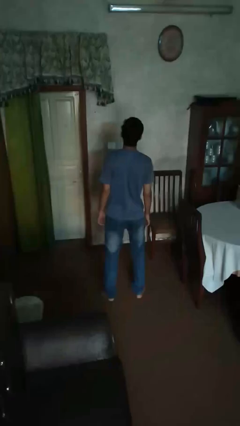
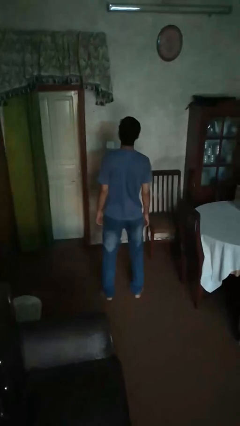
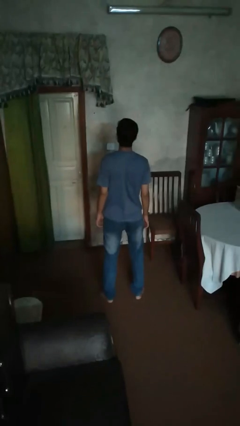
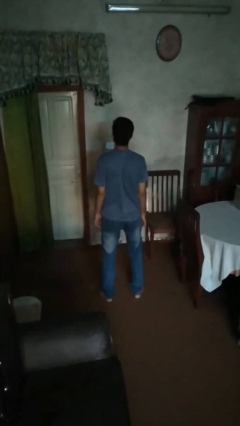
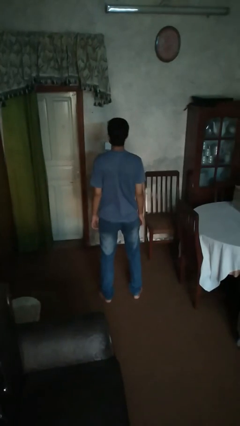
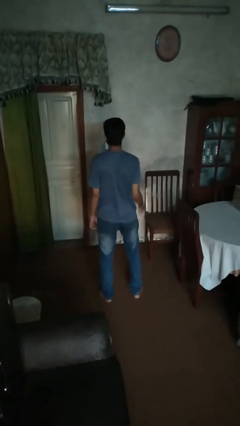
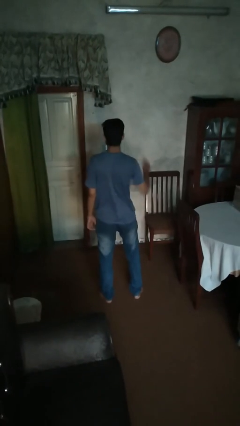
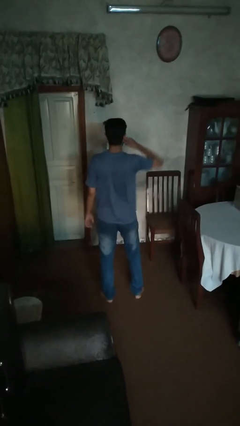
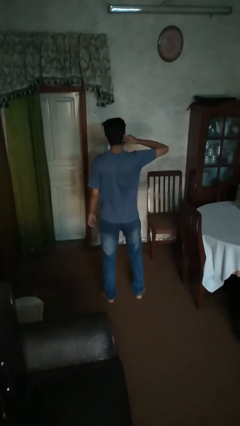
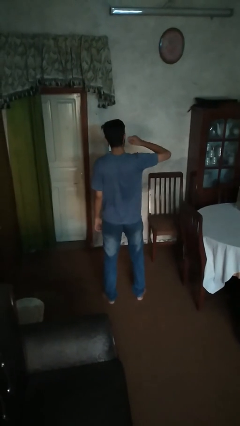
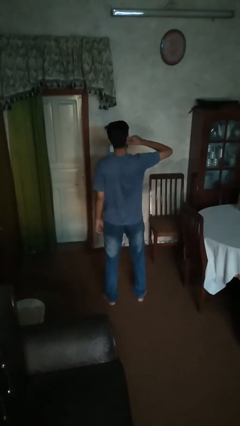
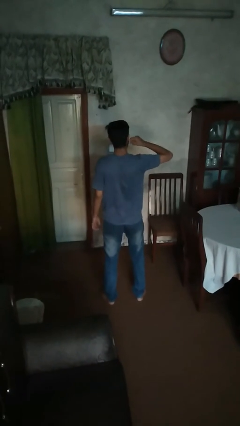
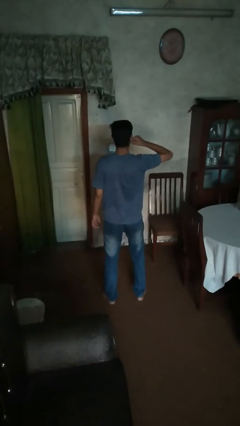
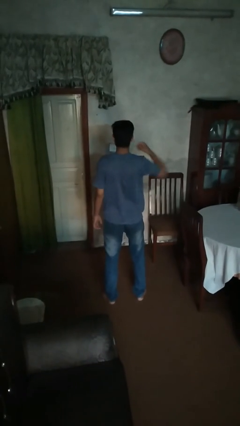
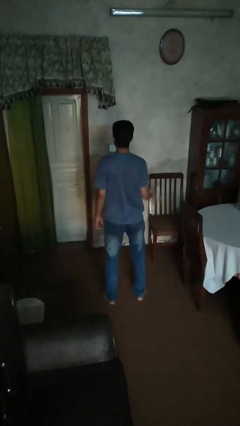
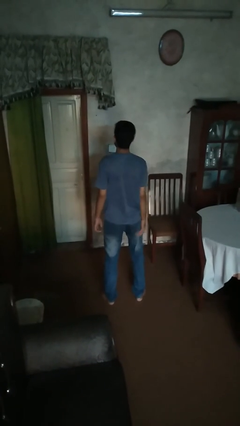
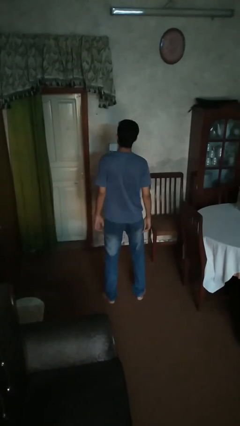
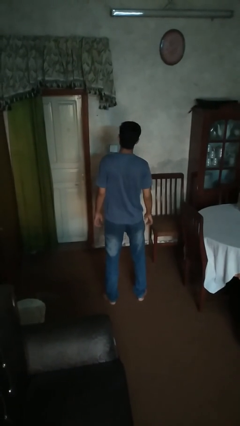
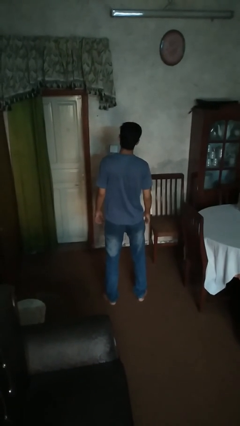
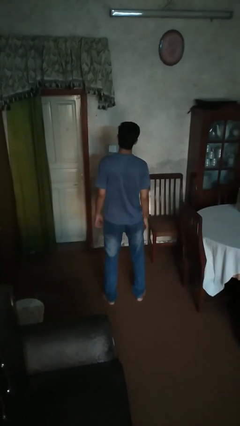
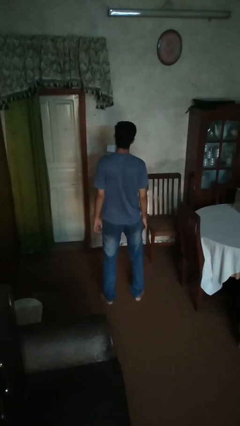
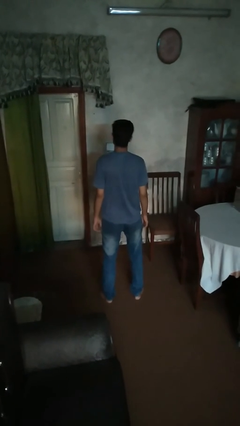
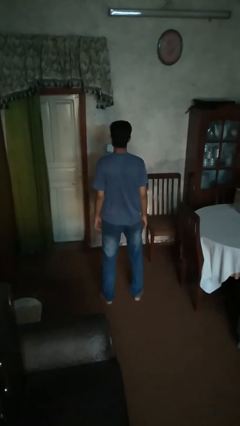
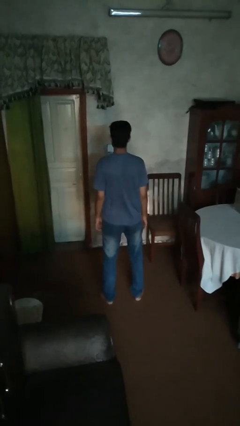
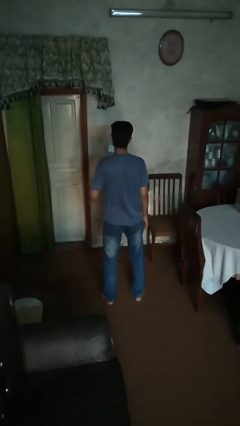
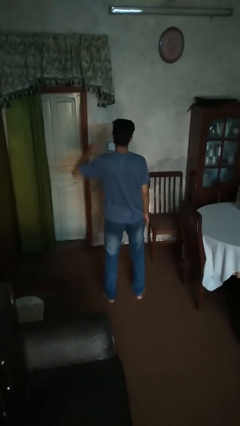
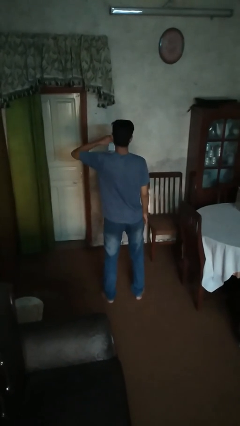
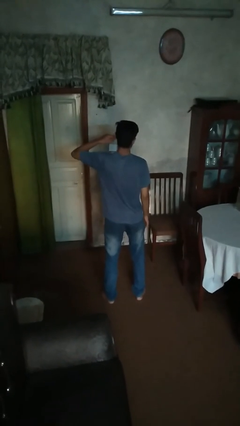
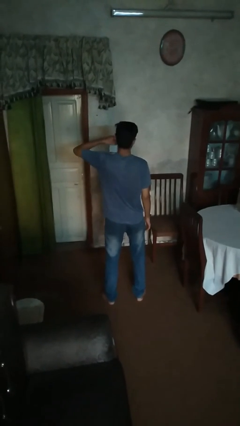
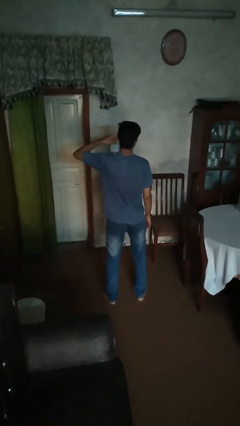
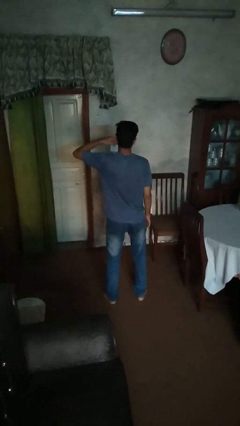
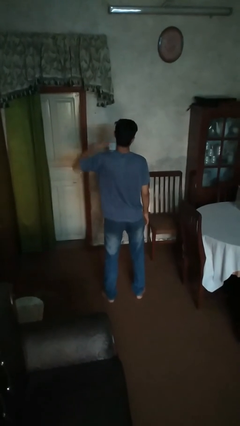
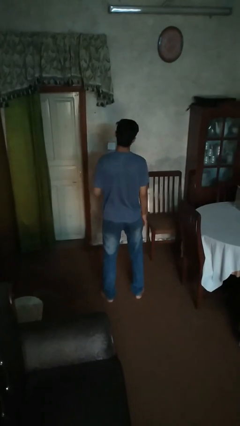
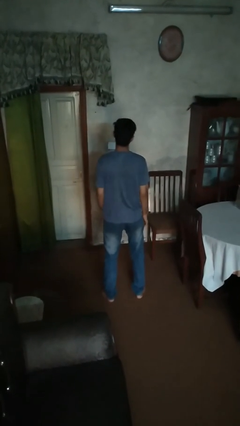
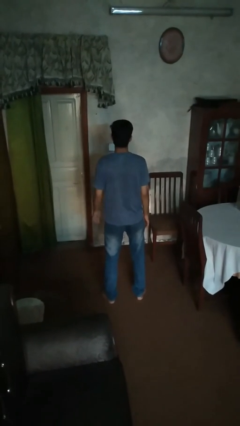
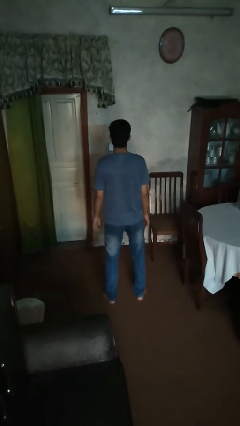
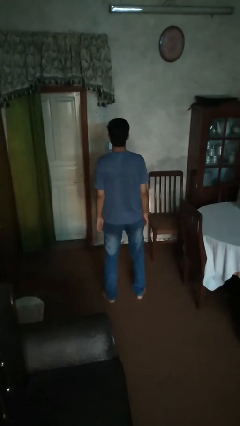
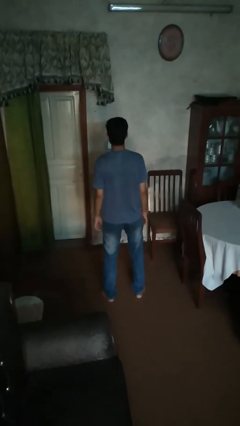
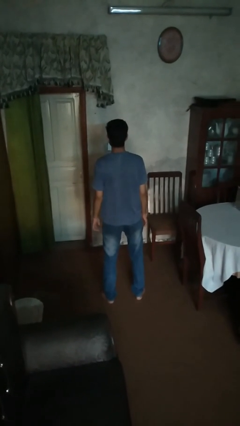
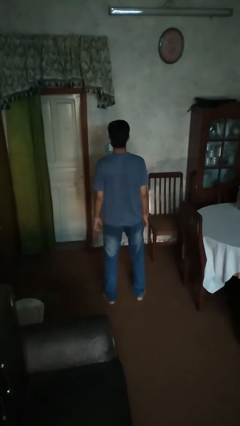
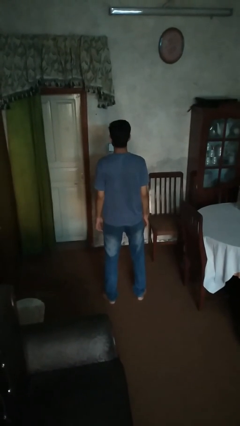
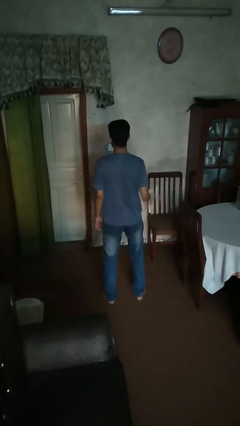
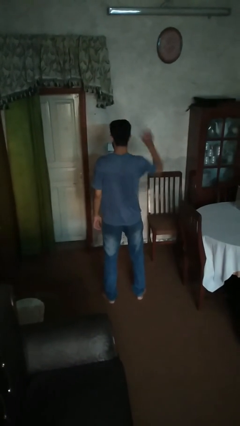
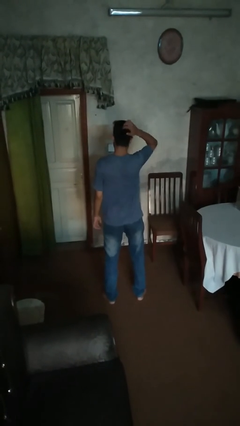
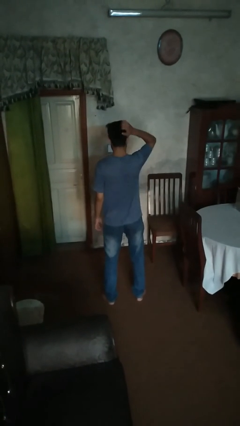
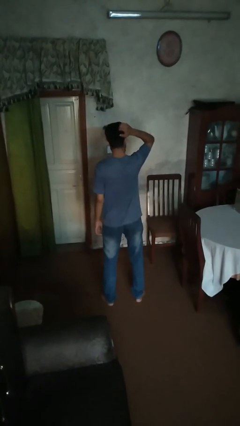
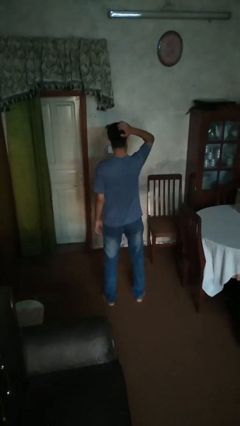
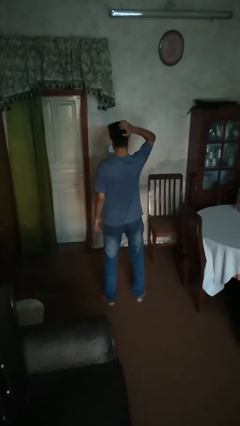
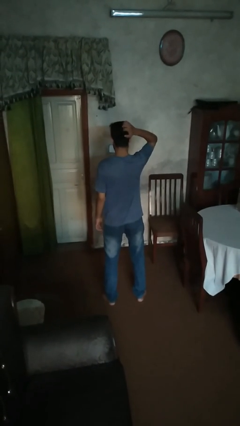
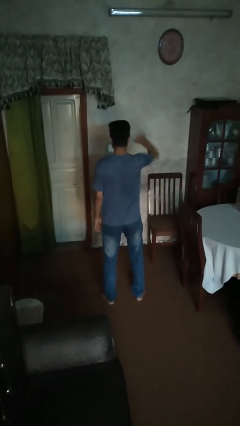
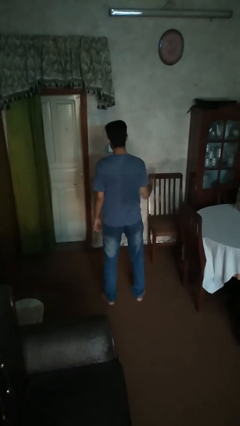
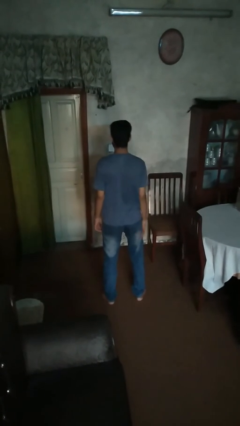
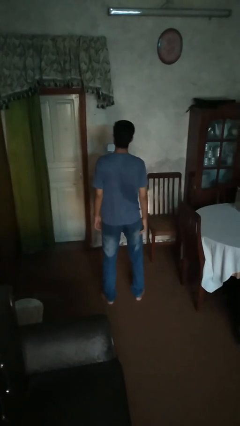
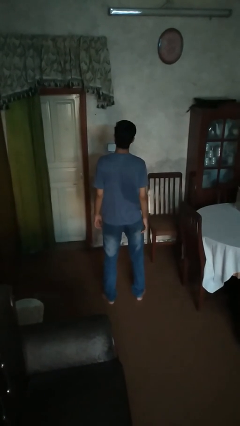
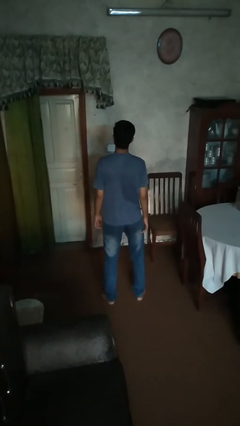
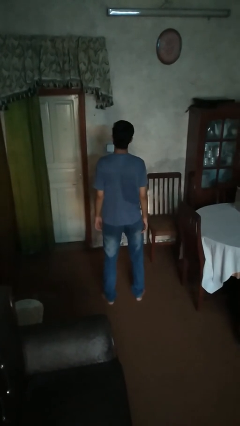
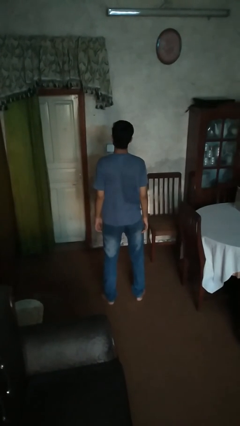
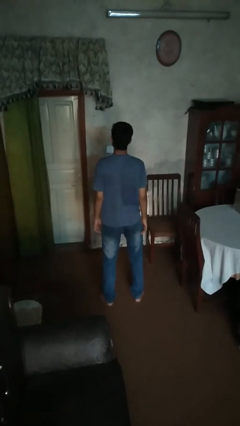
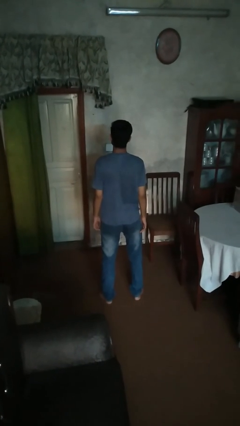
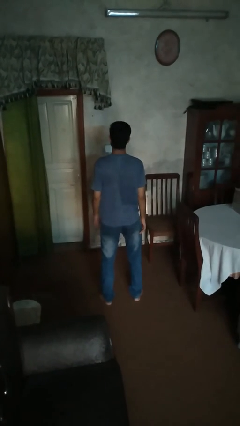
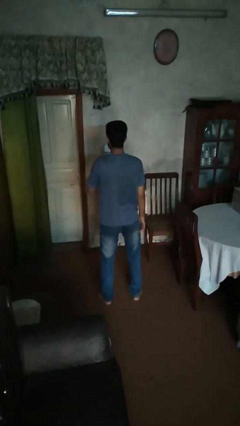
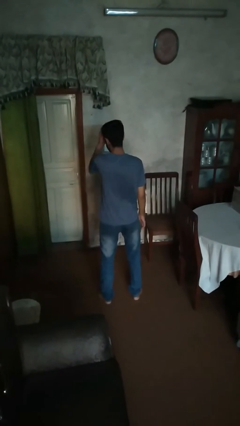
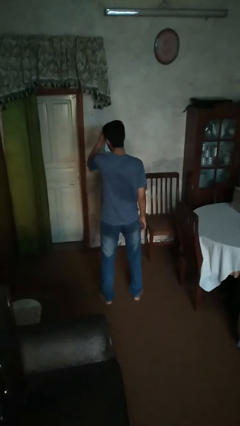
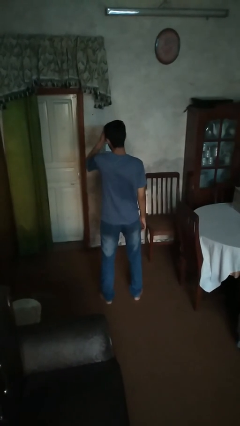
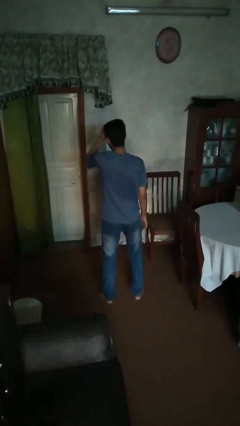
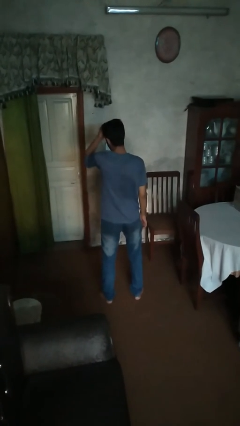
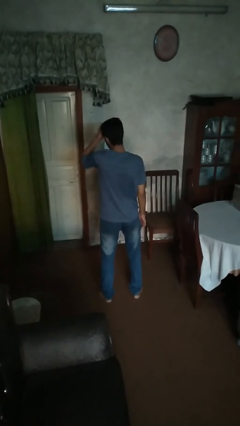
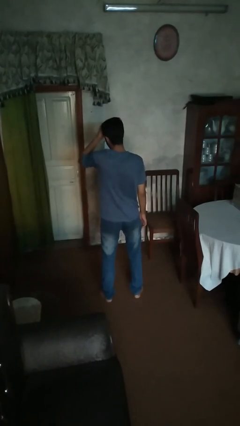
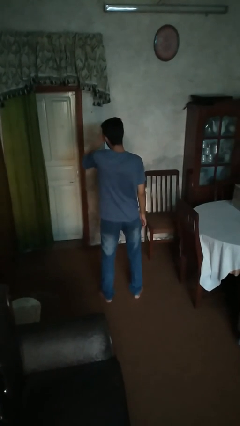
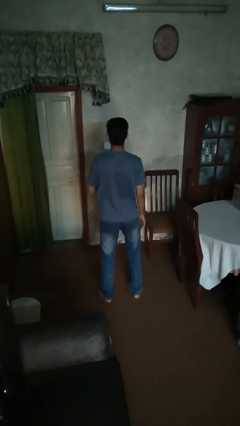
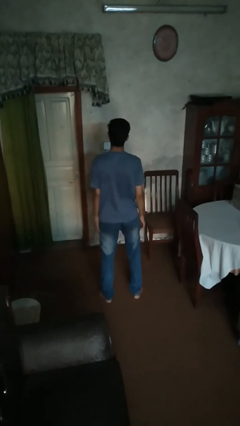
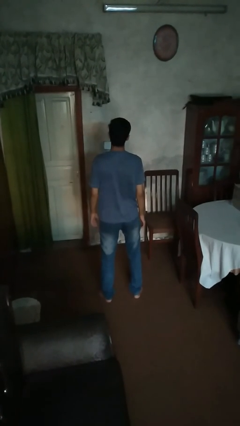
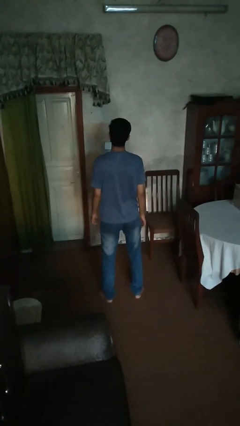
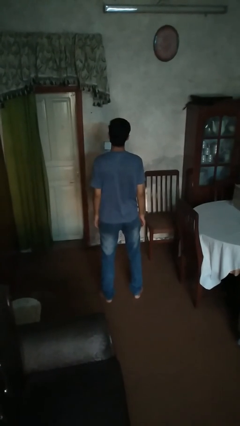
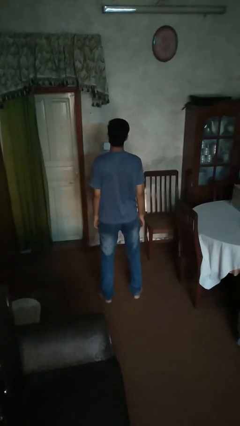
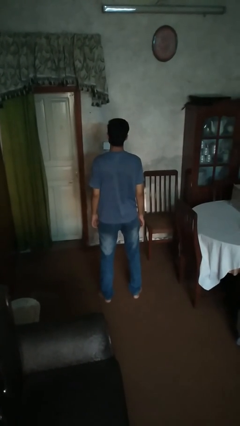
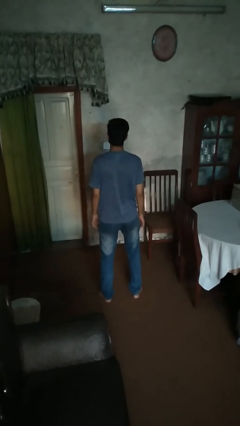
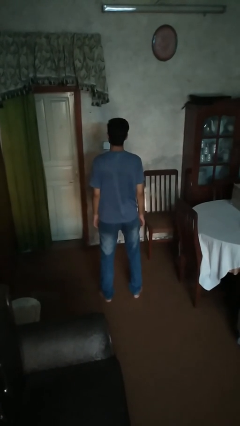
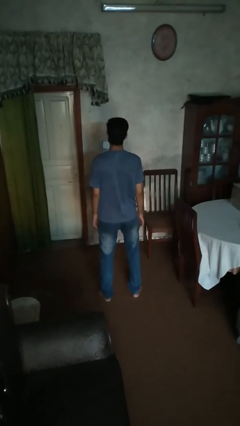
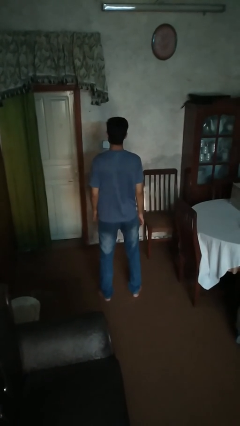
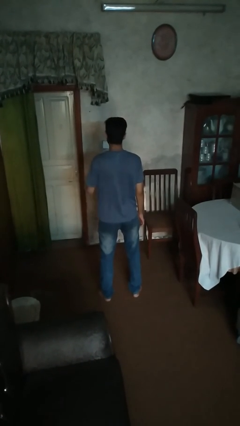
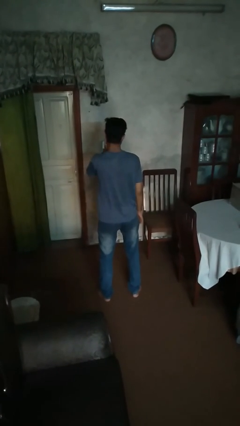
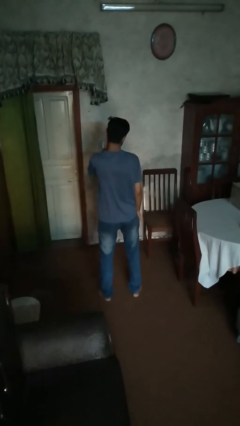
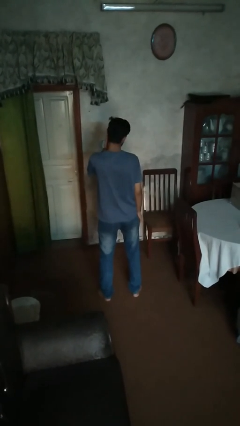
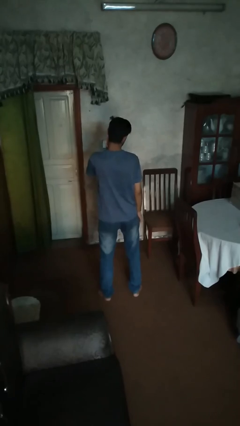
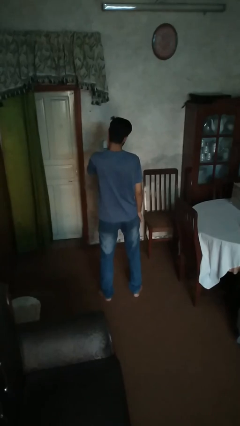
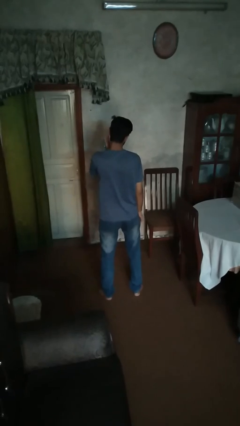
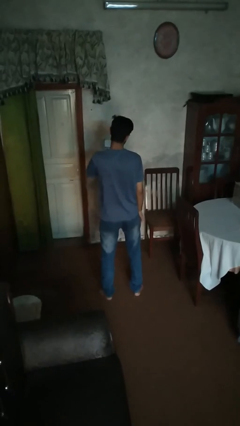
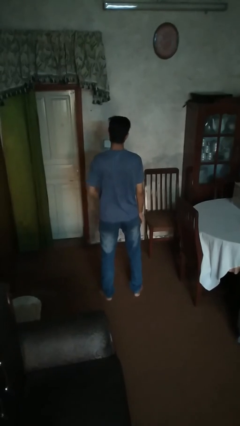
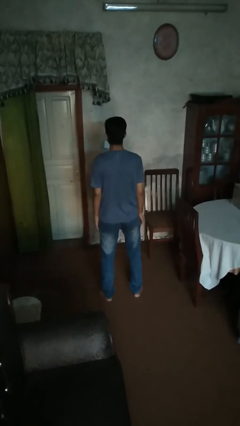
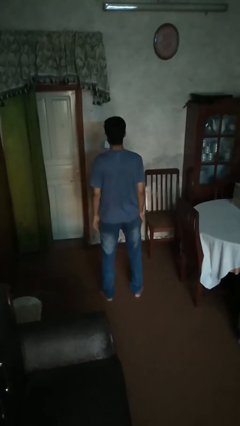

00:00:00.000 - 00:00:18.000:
person scratches face
